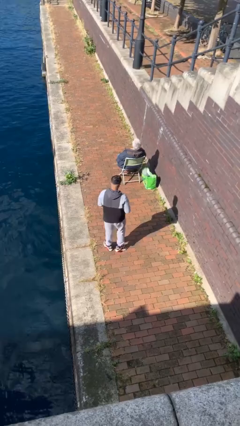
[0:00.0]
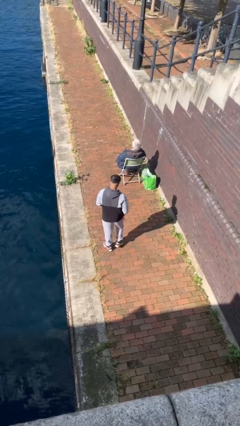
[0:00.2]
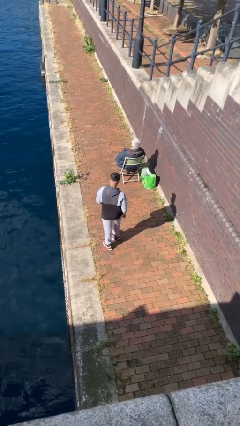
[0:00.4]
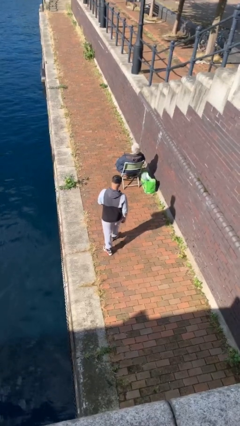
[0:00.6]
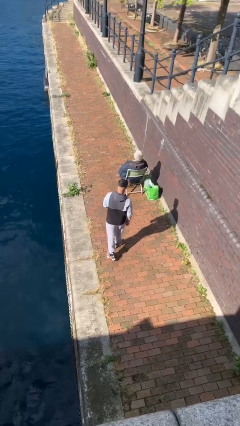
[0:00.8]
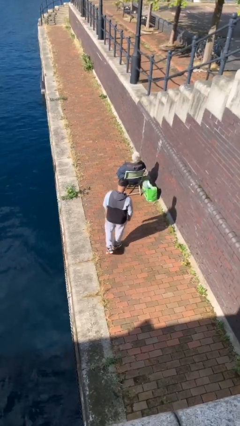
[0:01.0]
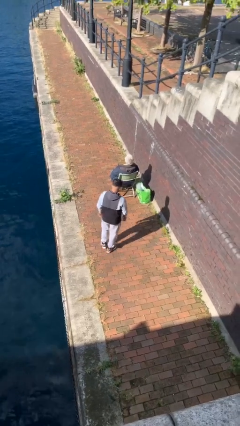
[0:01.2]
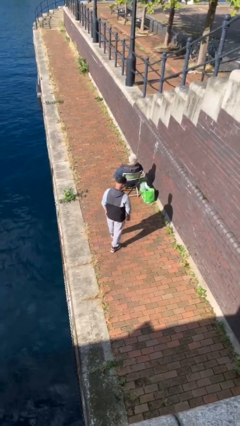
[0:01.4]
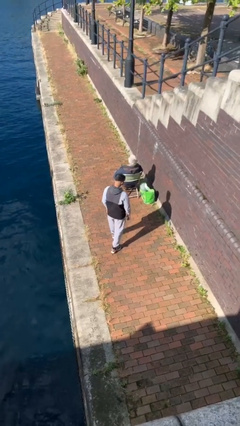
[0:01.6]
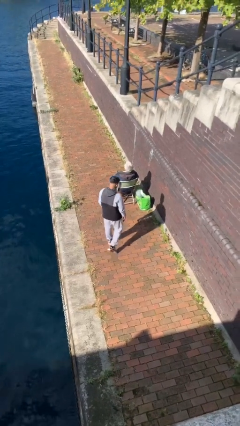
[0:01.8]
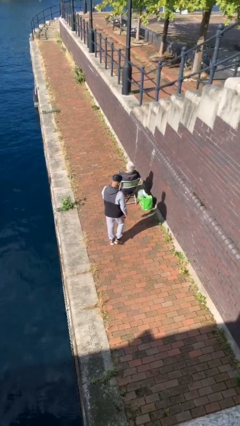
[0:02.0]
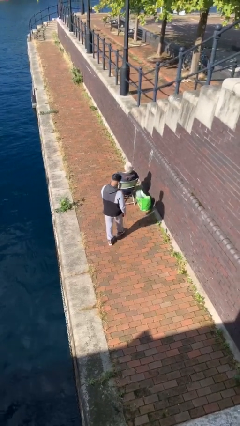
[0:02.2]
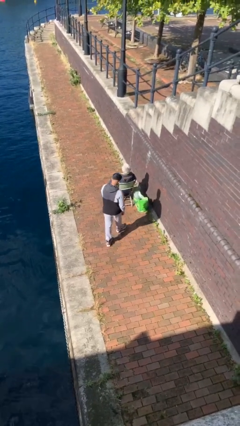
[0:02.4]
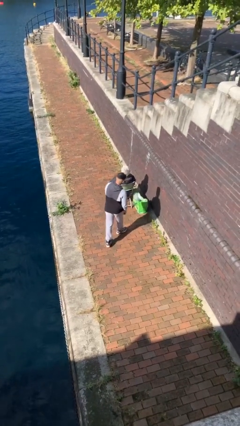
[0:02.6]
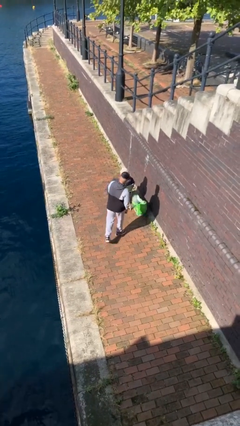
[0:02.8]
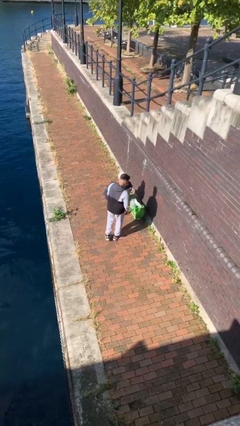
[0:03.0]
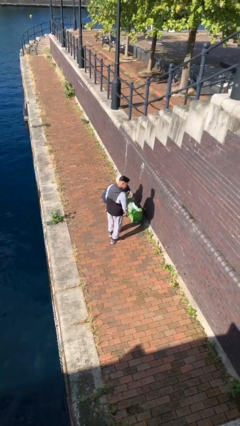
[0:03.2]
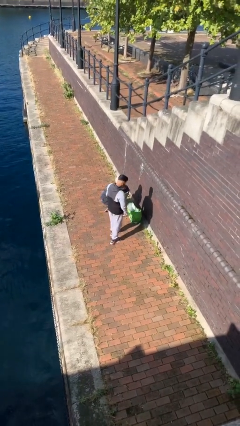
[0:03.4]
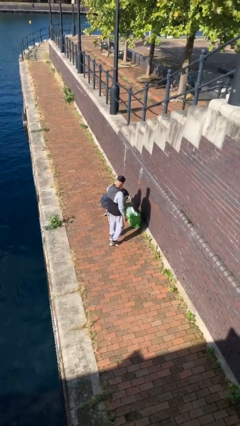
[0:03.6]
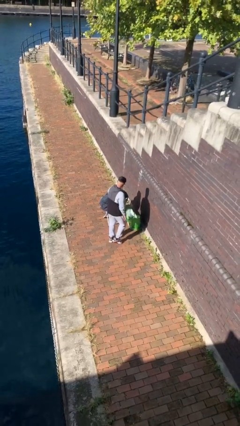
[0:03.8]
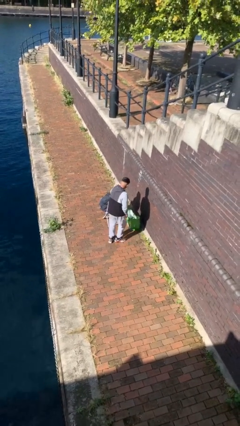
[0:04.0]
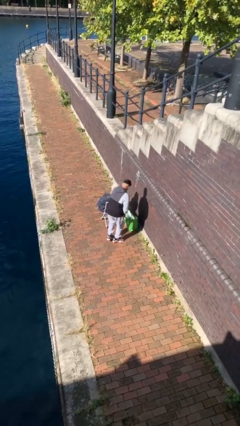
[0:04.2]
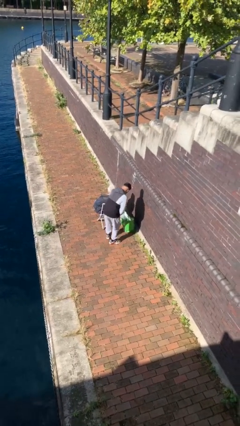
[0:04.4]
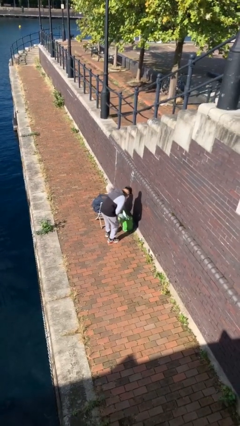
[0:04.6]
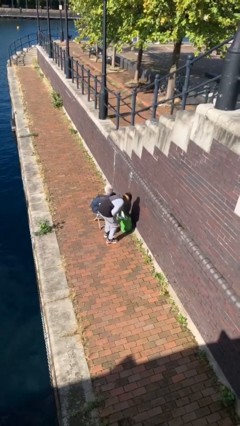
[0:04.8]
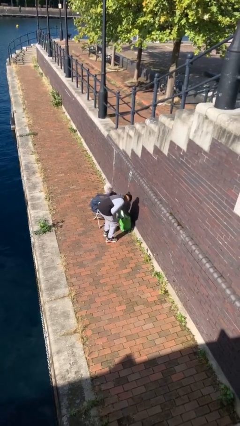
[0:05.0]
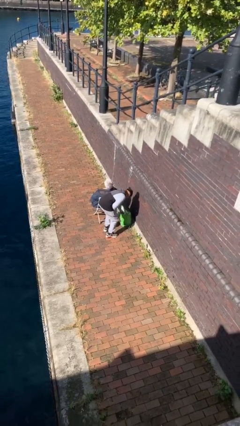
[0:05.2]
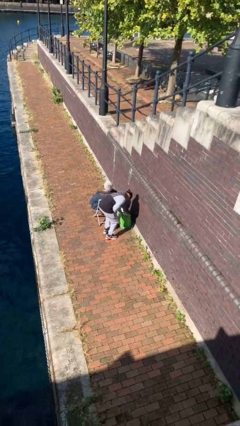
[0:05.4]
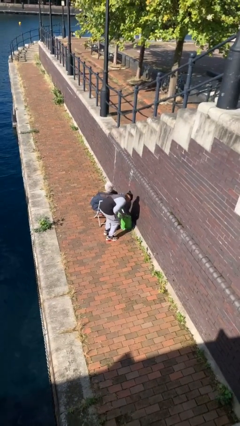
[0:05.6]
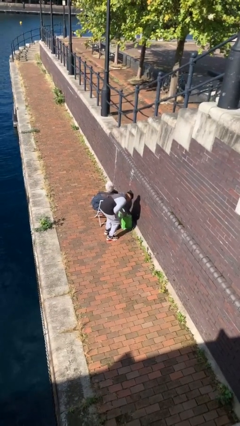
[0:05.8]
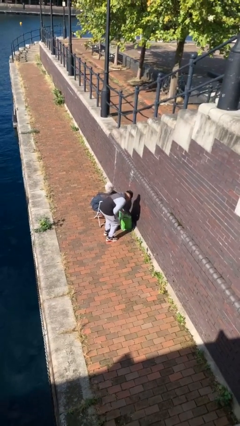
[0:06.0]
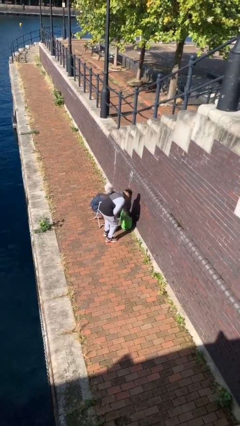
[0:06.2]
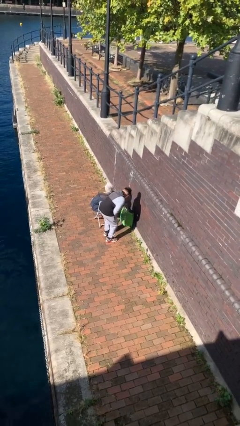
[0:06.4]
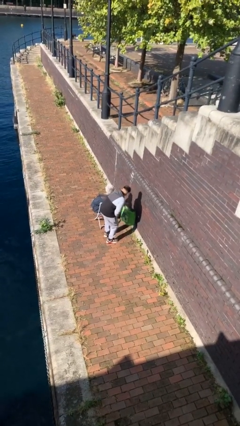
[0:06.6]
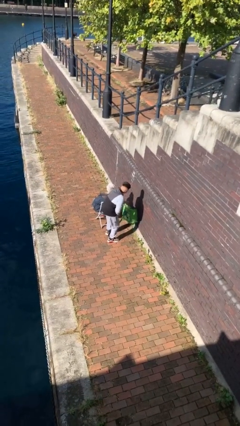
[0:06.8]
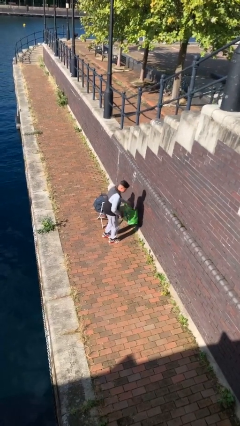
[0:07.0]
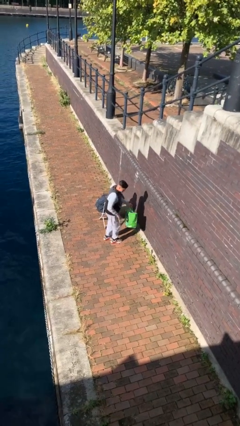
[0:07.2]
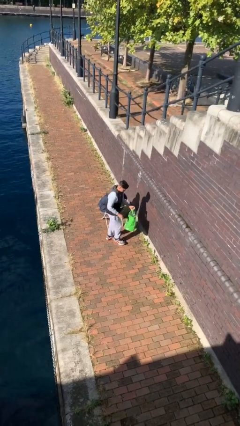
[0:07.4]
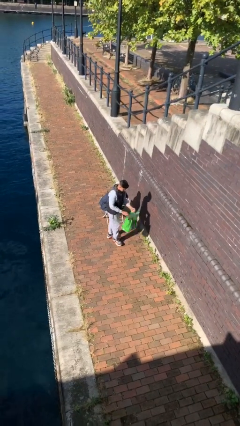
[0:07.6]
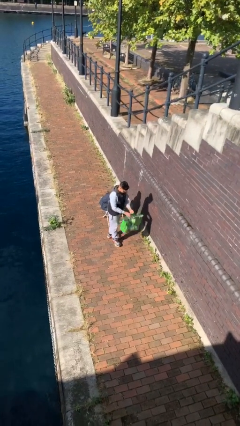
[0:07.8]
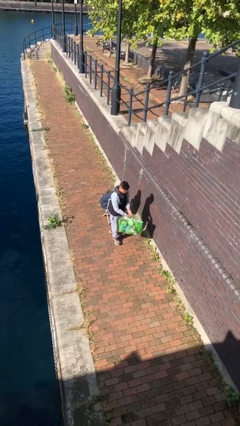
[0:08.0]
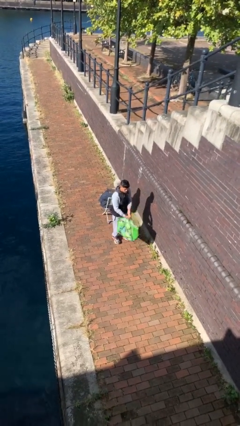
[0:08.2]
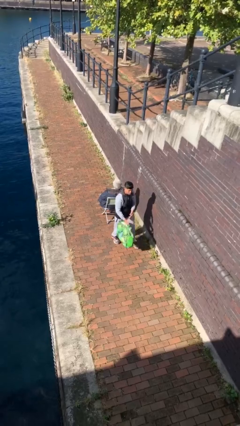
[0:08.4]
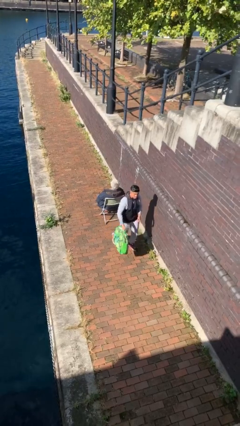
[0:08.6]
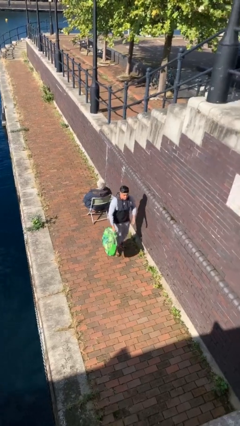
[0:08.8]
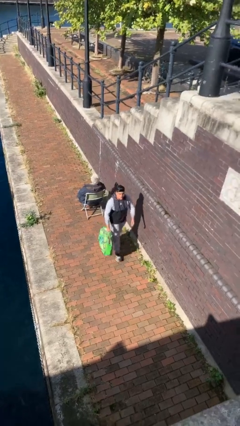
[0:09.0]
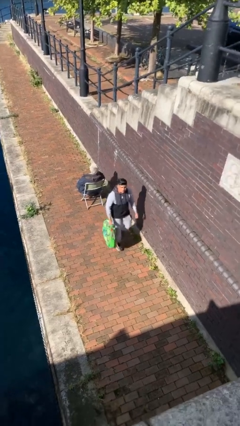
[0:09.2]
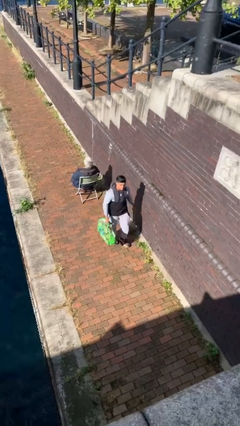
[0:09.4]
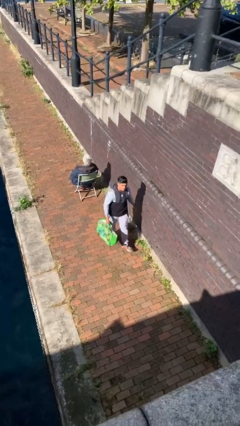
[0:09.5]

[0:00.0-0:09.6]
person steals object from person

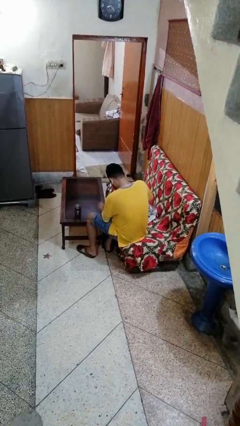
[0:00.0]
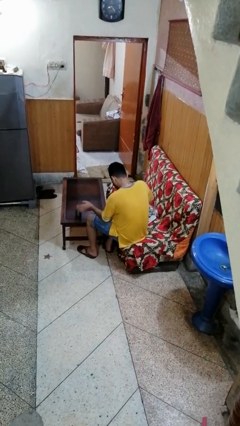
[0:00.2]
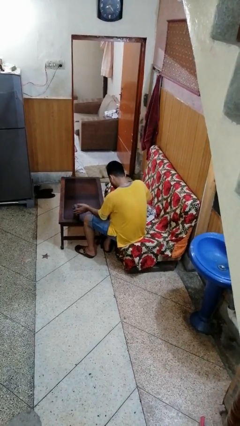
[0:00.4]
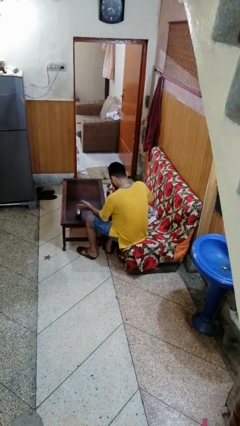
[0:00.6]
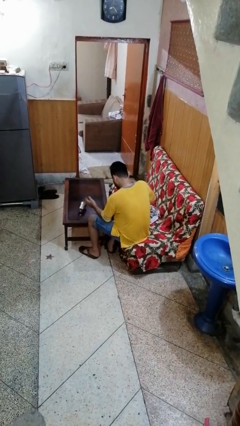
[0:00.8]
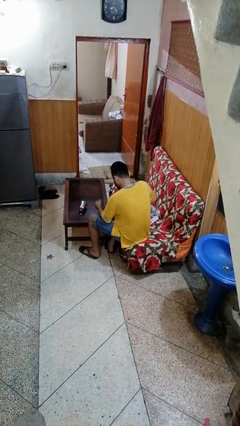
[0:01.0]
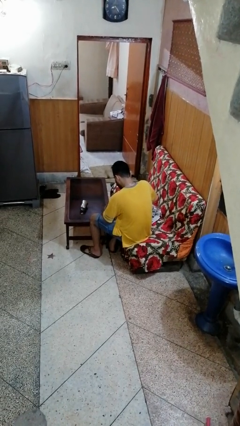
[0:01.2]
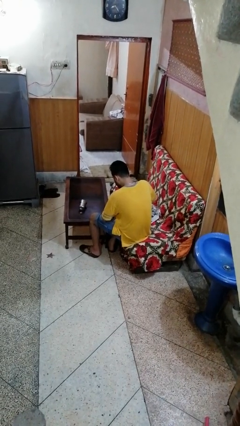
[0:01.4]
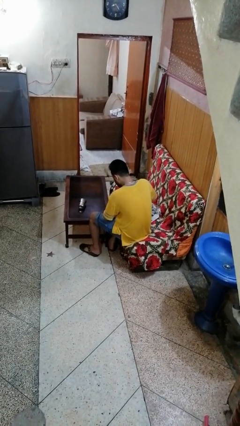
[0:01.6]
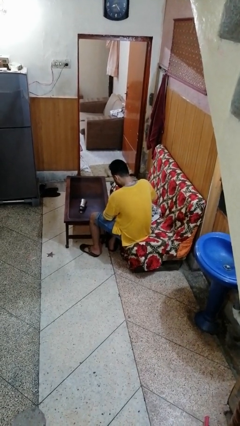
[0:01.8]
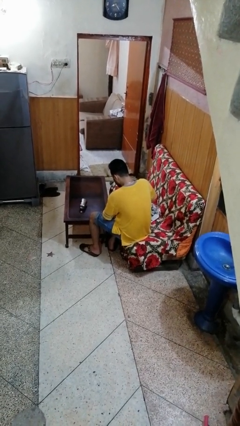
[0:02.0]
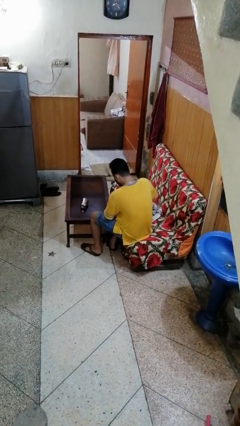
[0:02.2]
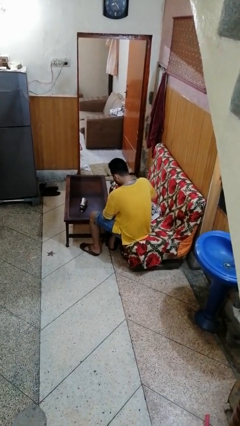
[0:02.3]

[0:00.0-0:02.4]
person knocks over glass

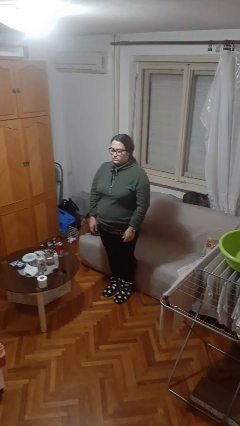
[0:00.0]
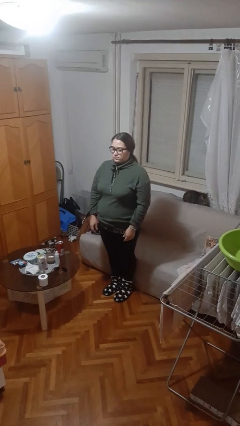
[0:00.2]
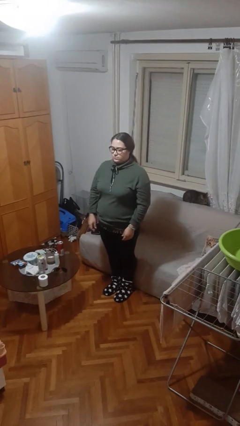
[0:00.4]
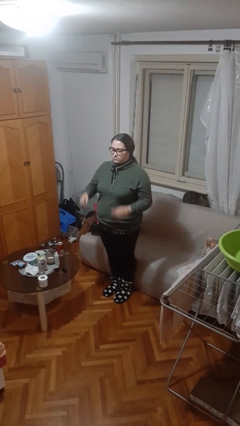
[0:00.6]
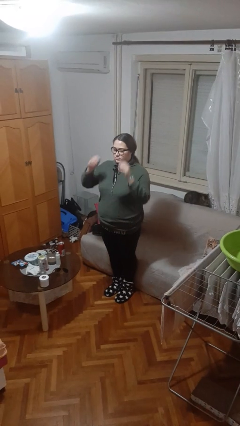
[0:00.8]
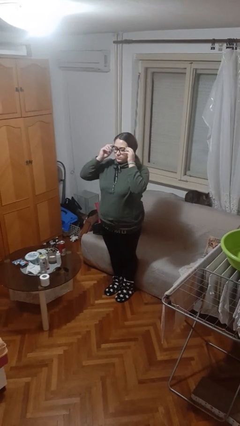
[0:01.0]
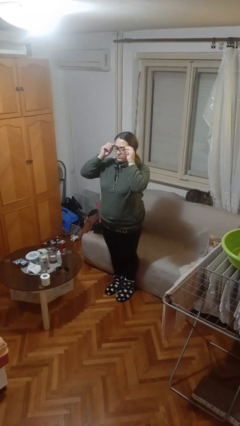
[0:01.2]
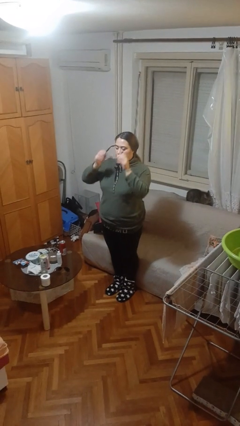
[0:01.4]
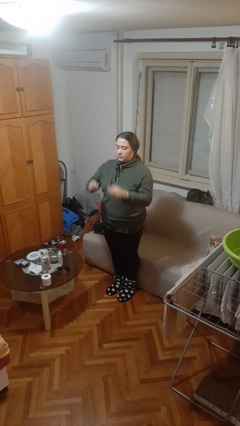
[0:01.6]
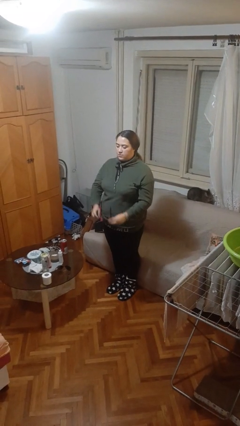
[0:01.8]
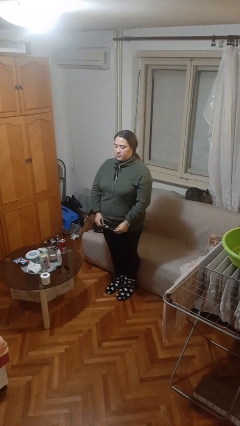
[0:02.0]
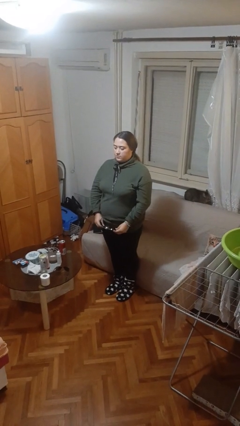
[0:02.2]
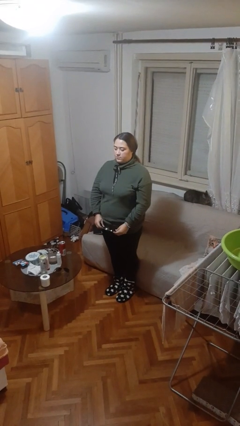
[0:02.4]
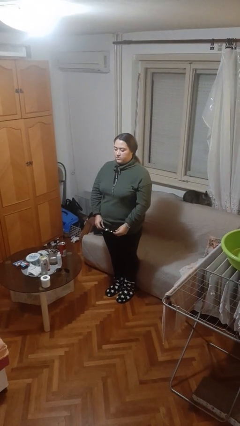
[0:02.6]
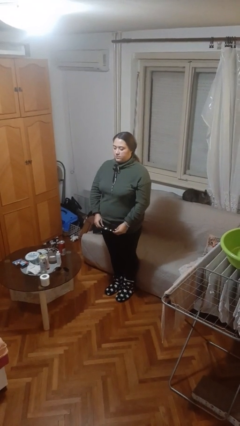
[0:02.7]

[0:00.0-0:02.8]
person takes off glasses

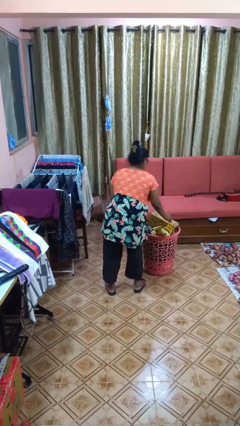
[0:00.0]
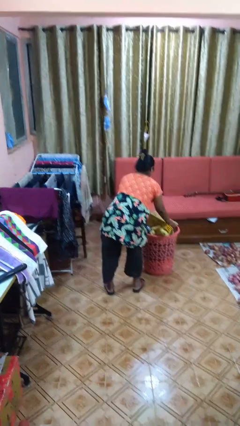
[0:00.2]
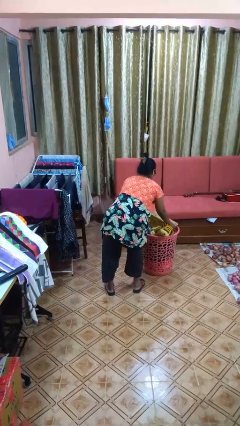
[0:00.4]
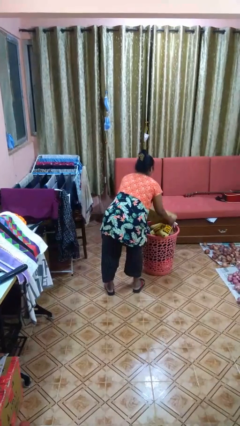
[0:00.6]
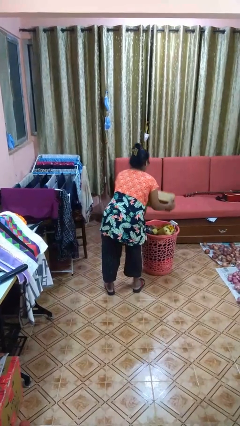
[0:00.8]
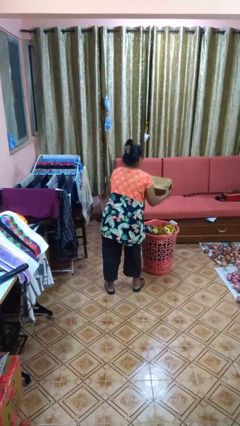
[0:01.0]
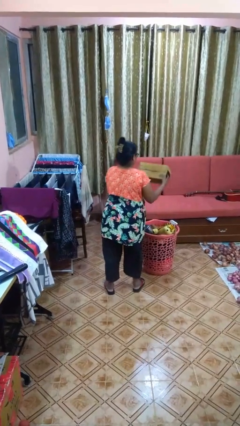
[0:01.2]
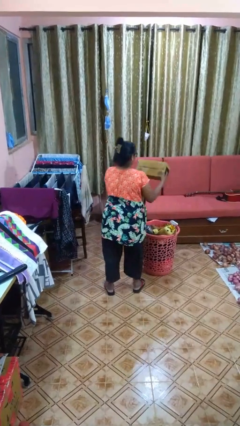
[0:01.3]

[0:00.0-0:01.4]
person takes object from basket

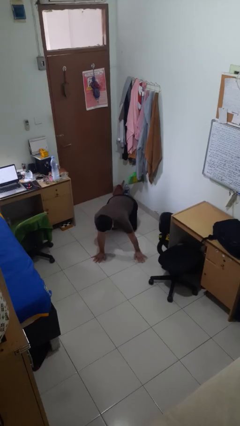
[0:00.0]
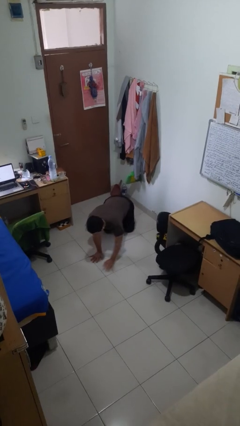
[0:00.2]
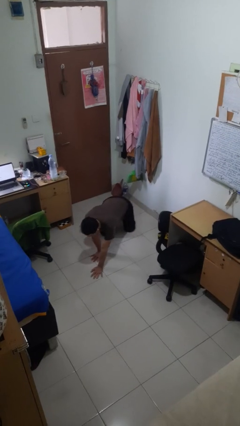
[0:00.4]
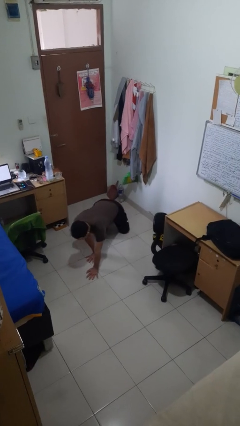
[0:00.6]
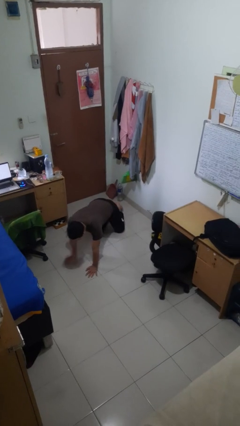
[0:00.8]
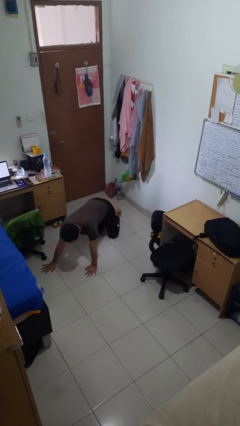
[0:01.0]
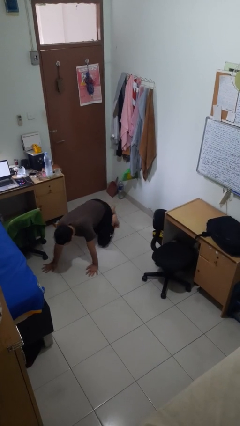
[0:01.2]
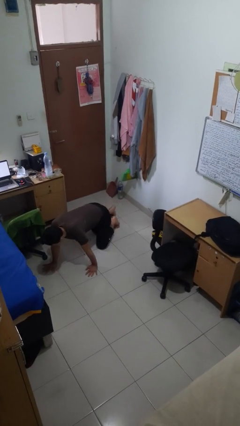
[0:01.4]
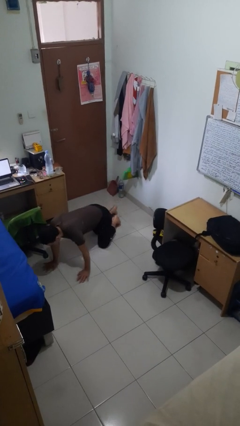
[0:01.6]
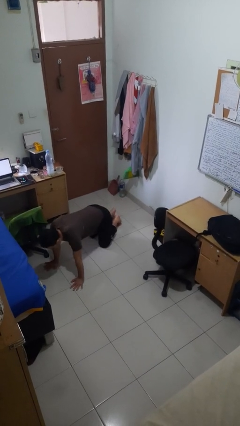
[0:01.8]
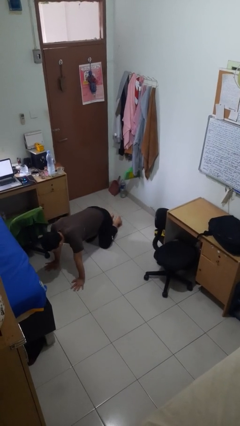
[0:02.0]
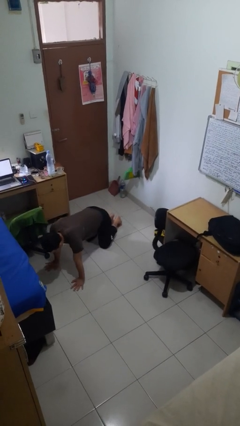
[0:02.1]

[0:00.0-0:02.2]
person crawls
